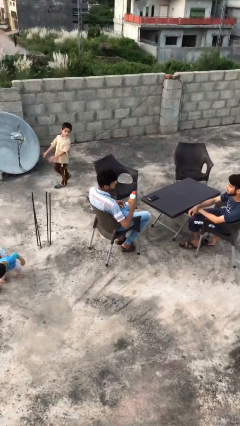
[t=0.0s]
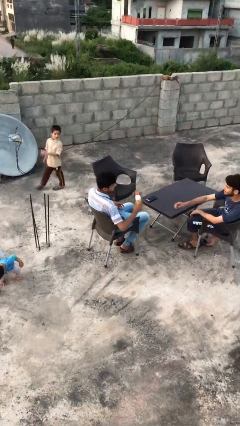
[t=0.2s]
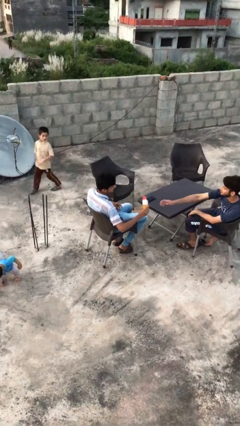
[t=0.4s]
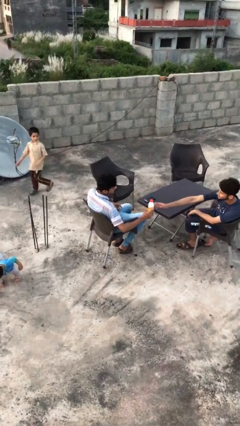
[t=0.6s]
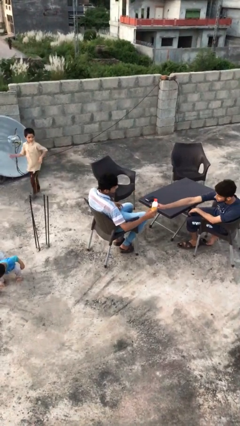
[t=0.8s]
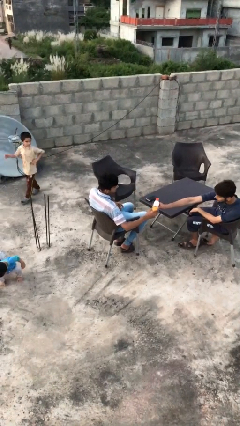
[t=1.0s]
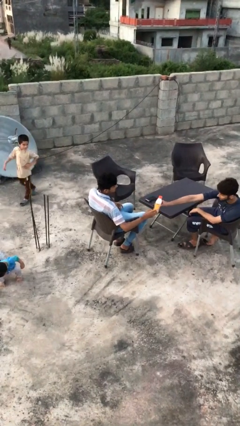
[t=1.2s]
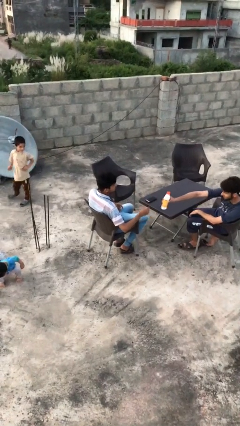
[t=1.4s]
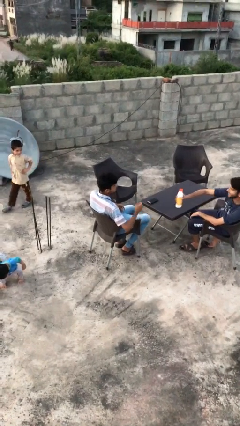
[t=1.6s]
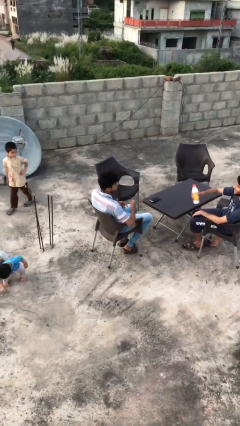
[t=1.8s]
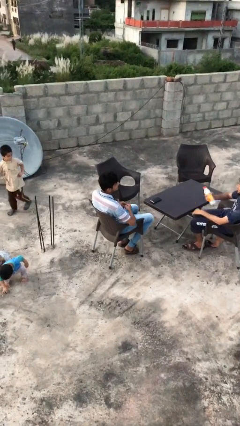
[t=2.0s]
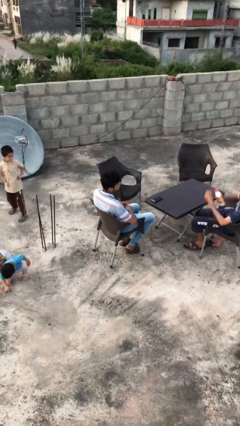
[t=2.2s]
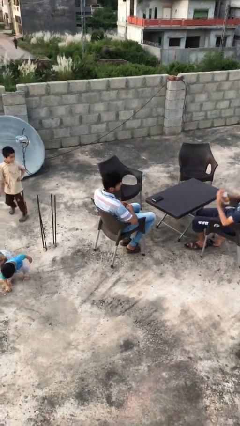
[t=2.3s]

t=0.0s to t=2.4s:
person transfers object to person

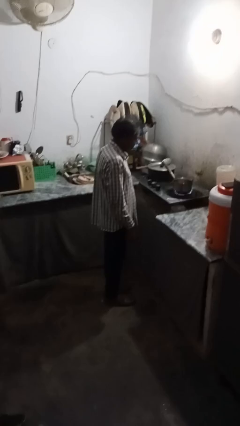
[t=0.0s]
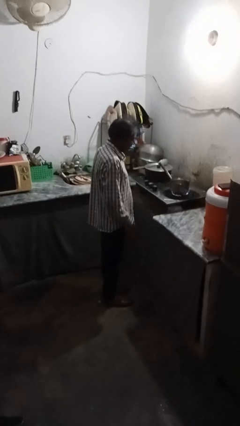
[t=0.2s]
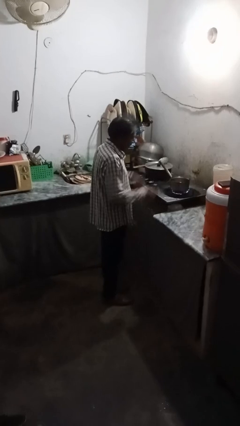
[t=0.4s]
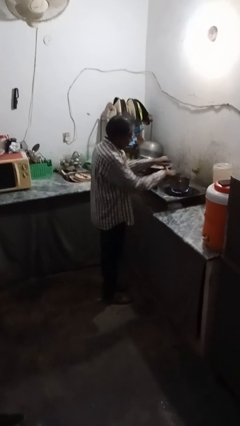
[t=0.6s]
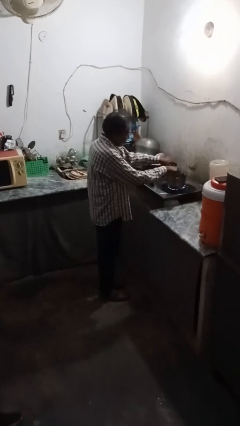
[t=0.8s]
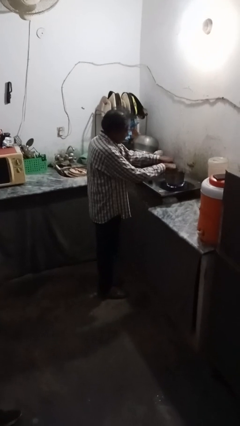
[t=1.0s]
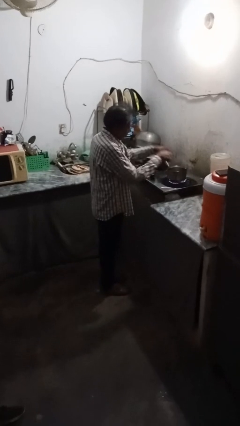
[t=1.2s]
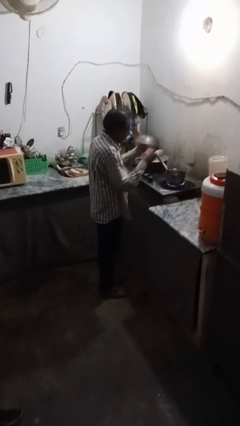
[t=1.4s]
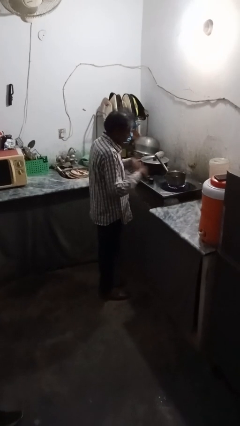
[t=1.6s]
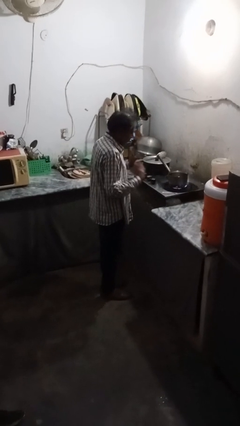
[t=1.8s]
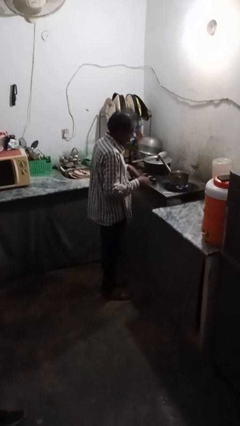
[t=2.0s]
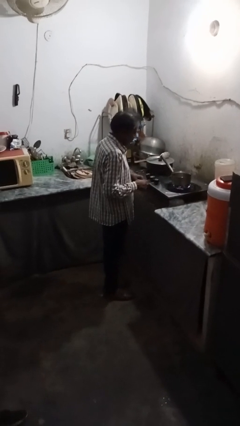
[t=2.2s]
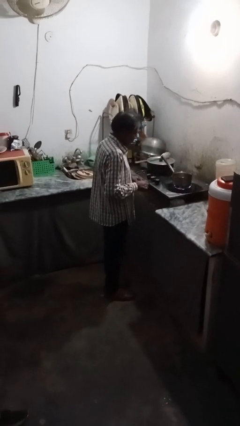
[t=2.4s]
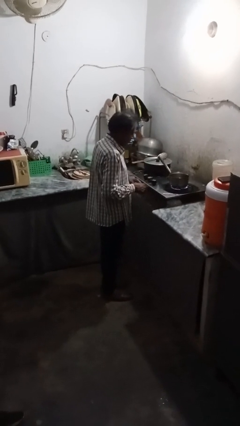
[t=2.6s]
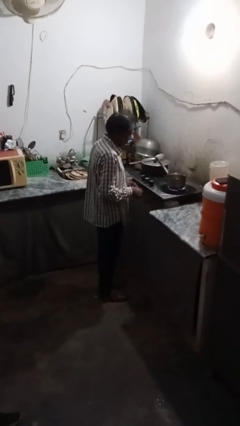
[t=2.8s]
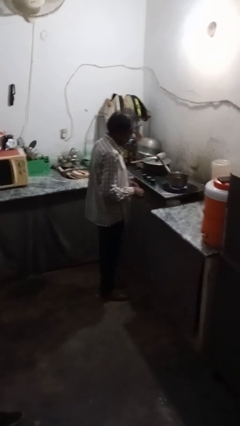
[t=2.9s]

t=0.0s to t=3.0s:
person burns hand

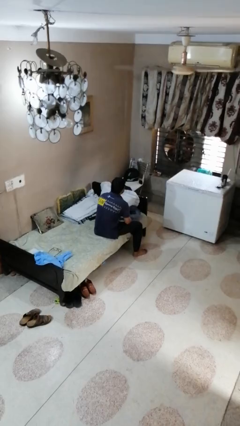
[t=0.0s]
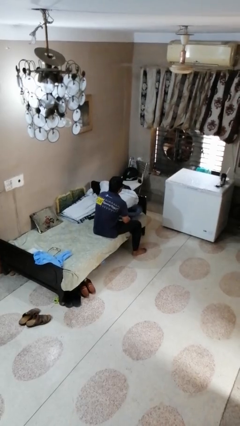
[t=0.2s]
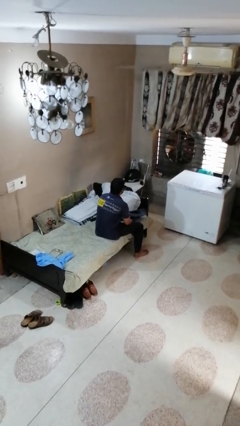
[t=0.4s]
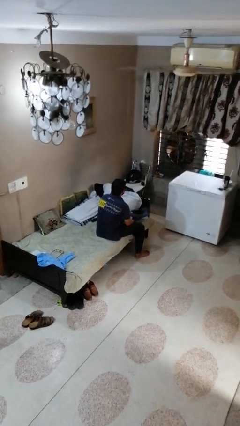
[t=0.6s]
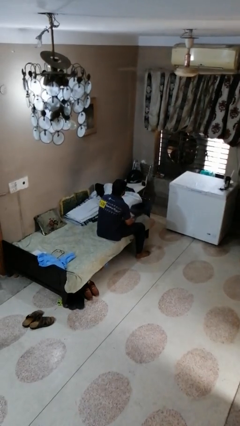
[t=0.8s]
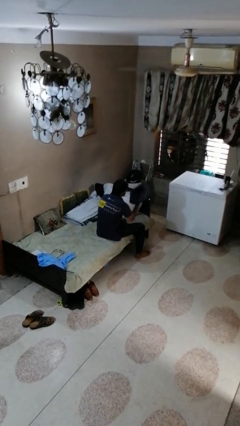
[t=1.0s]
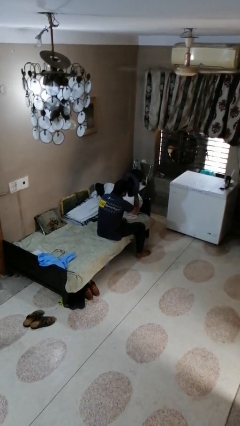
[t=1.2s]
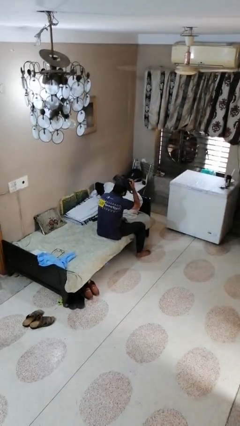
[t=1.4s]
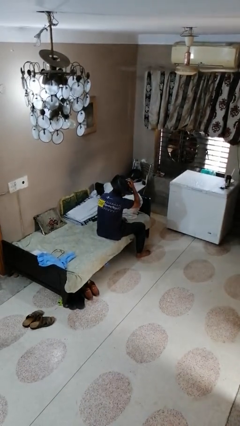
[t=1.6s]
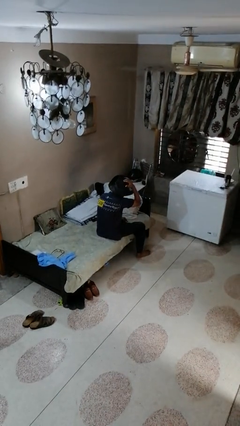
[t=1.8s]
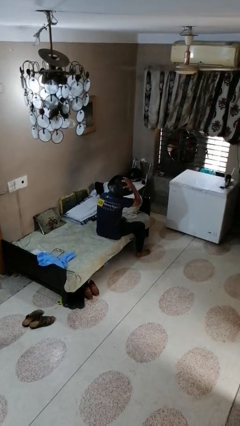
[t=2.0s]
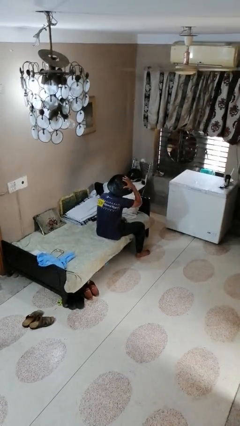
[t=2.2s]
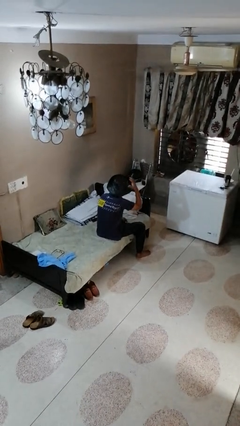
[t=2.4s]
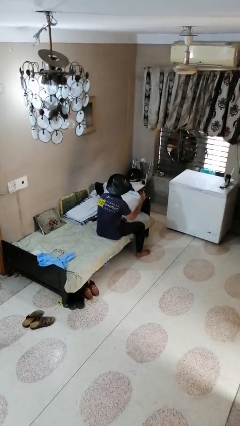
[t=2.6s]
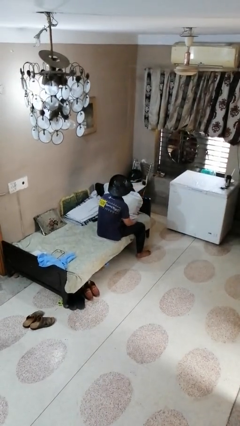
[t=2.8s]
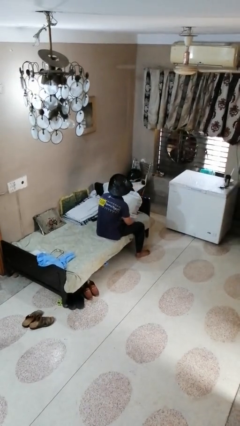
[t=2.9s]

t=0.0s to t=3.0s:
person puts on hat

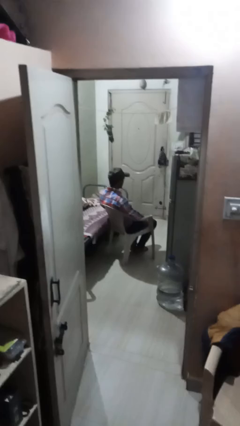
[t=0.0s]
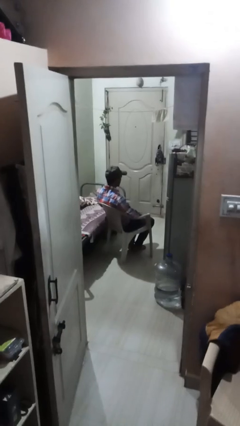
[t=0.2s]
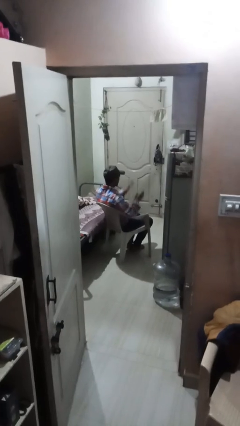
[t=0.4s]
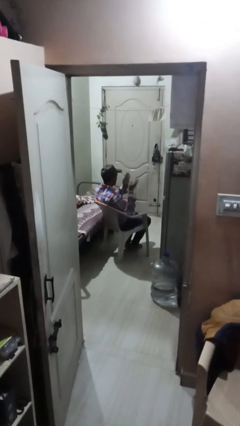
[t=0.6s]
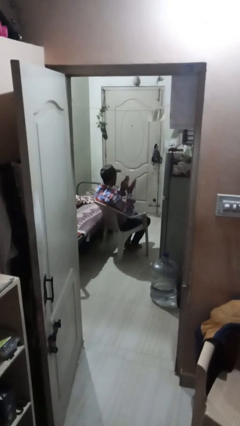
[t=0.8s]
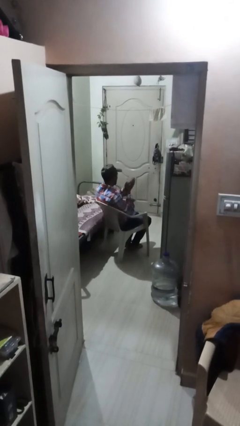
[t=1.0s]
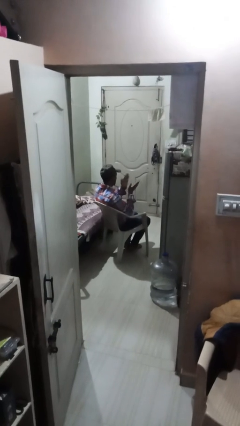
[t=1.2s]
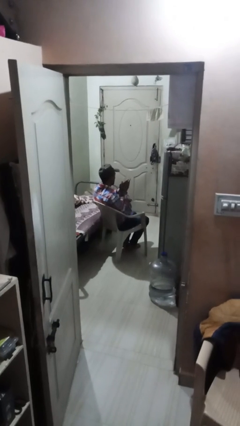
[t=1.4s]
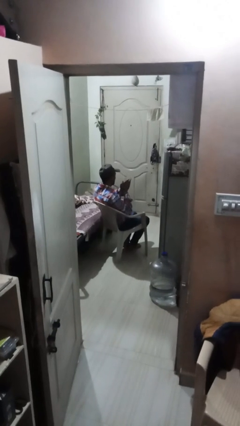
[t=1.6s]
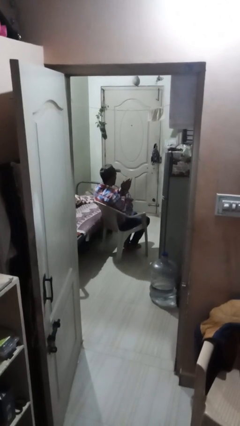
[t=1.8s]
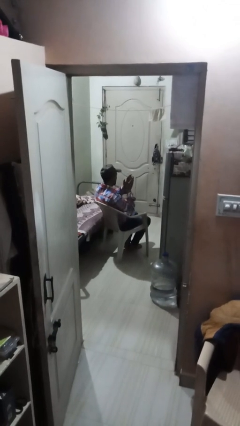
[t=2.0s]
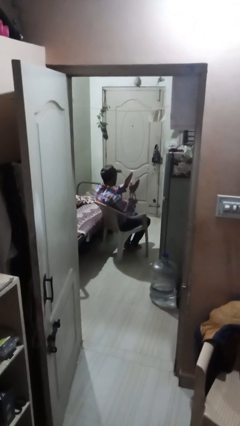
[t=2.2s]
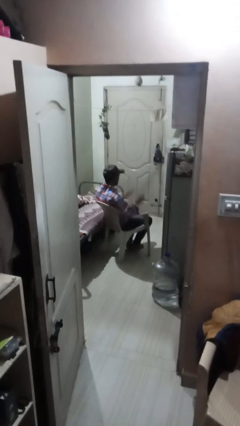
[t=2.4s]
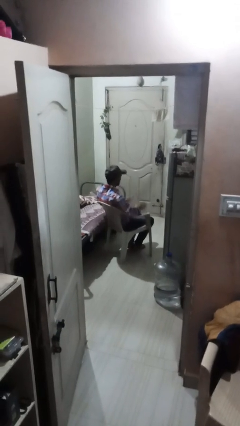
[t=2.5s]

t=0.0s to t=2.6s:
person claps hands

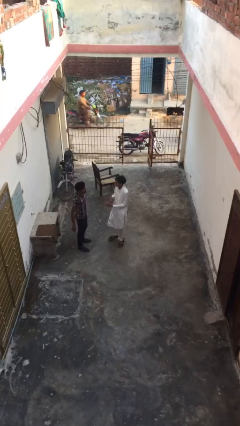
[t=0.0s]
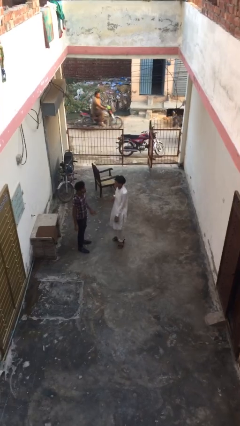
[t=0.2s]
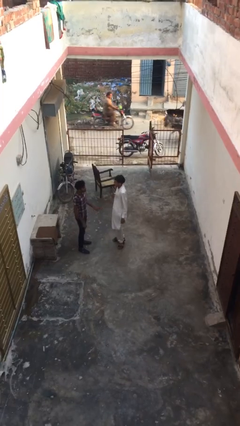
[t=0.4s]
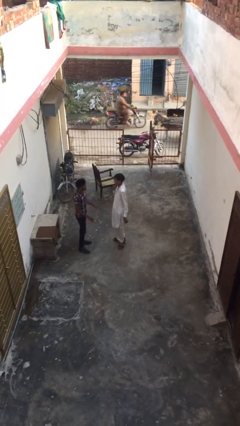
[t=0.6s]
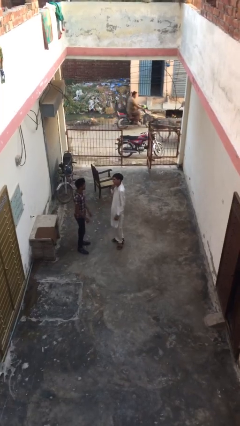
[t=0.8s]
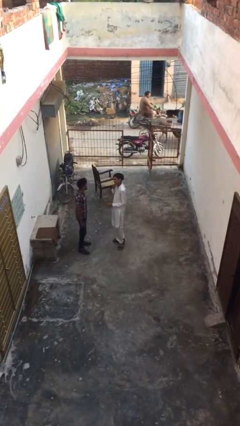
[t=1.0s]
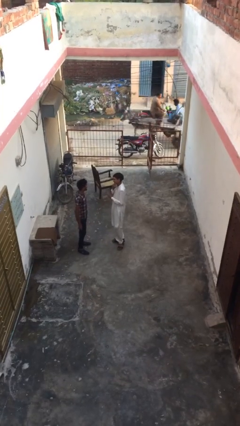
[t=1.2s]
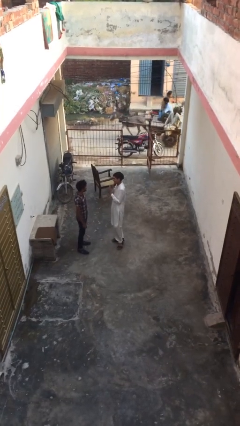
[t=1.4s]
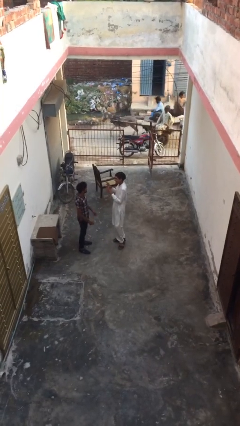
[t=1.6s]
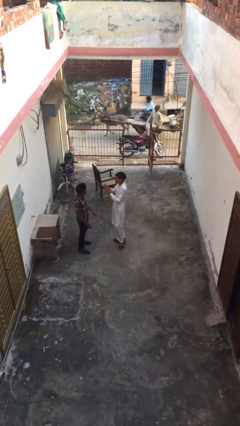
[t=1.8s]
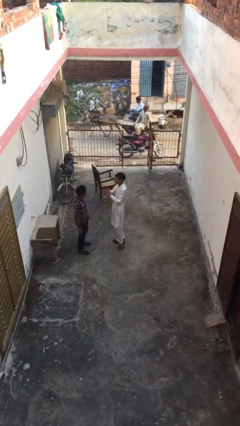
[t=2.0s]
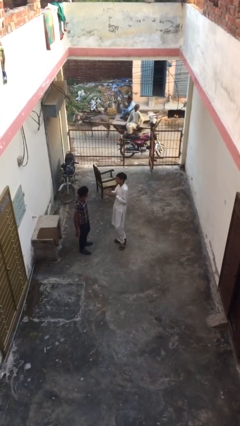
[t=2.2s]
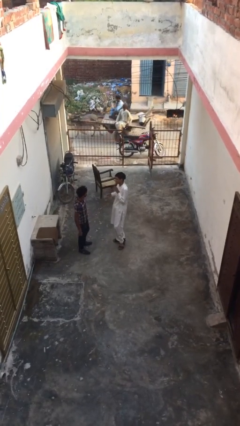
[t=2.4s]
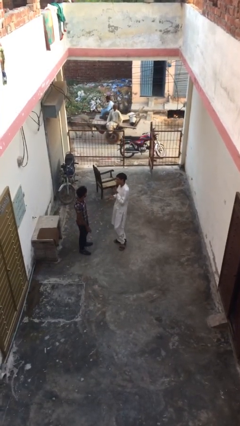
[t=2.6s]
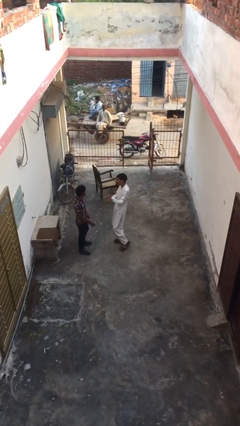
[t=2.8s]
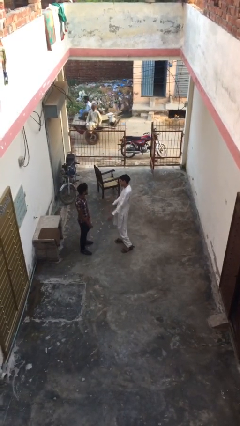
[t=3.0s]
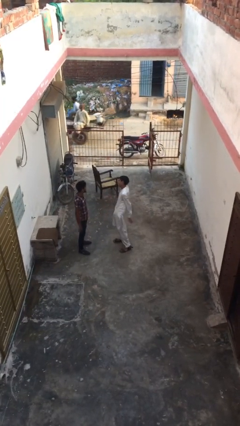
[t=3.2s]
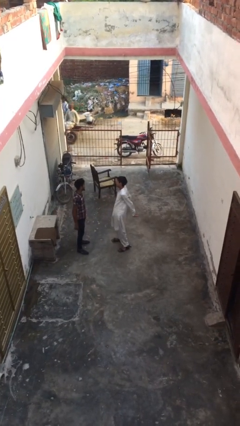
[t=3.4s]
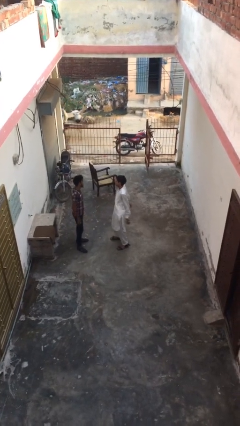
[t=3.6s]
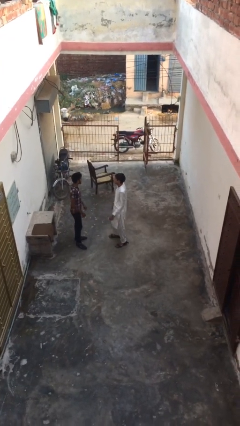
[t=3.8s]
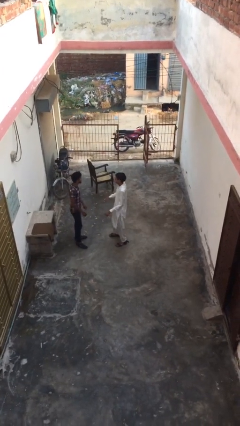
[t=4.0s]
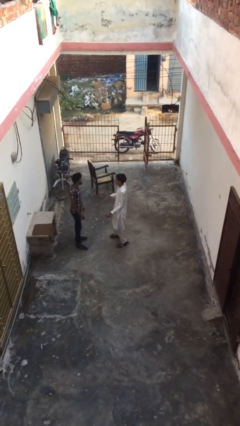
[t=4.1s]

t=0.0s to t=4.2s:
person talks to person

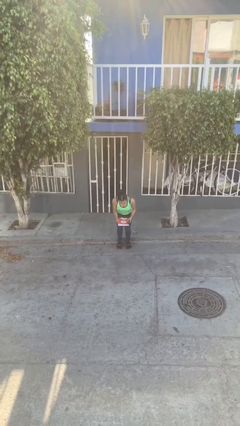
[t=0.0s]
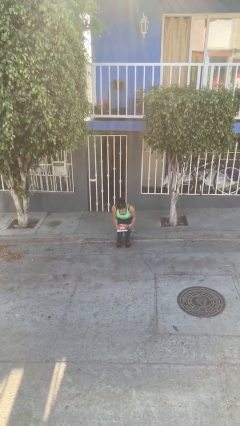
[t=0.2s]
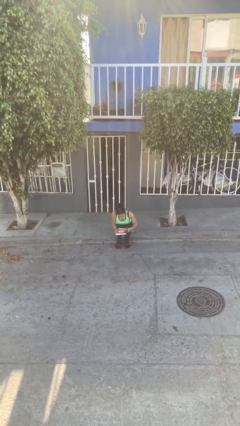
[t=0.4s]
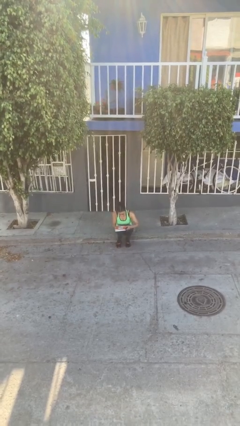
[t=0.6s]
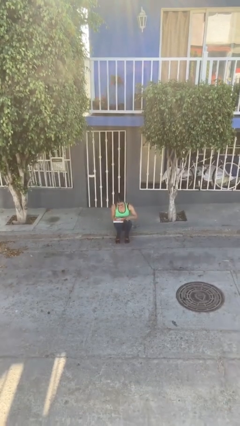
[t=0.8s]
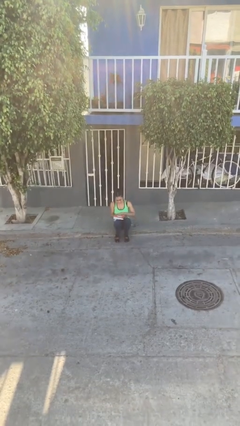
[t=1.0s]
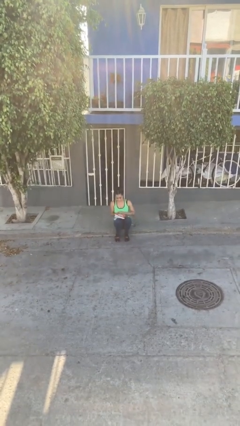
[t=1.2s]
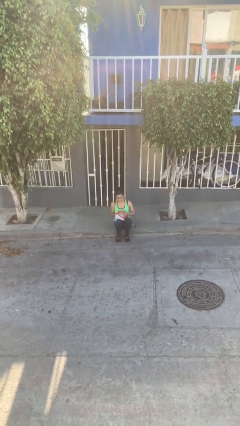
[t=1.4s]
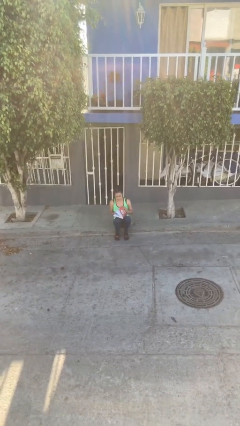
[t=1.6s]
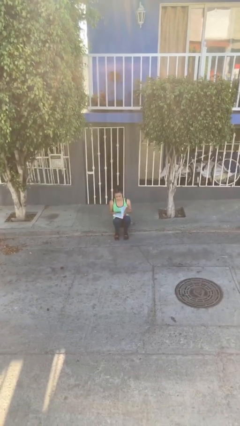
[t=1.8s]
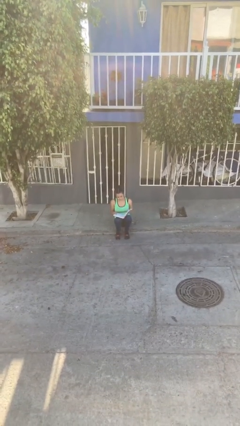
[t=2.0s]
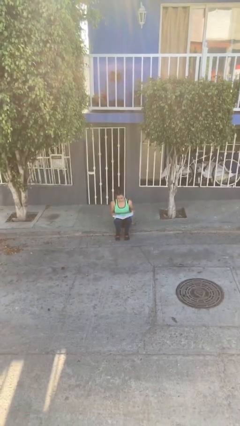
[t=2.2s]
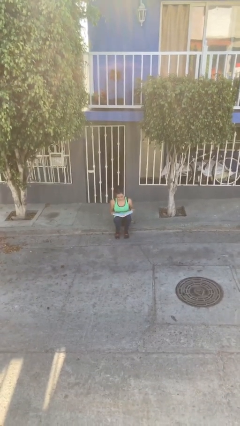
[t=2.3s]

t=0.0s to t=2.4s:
person sits down
